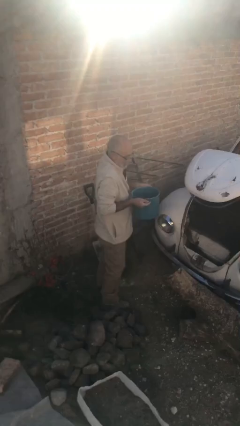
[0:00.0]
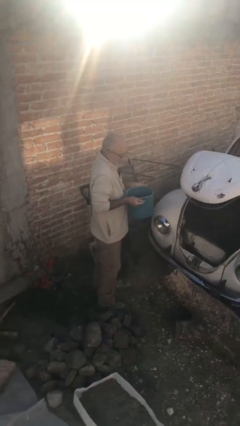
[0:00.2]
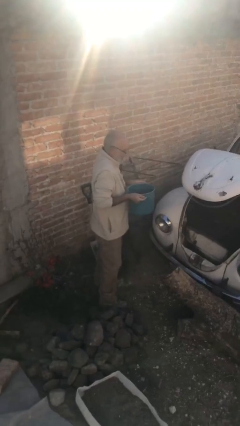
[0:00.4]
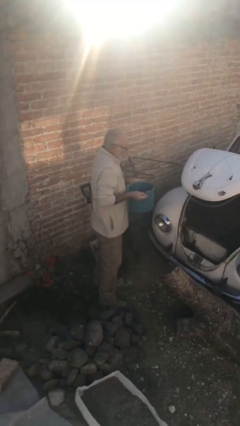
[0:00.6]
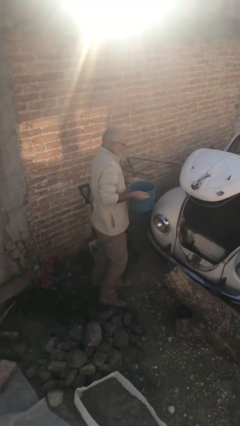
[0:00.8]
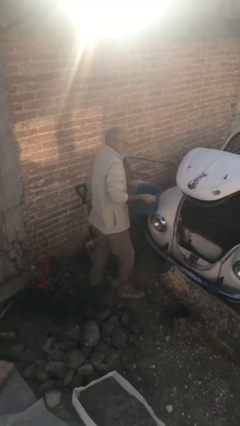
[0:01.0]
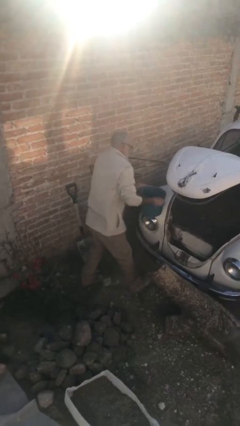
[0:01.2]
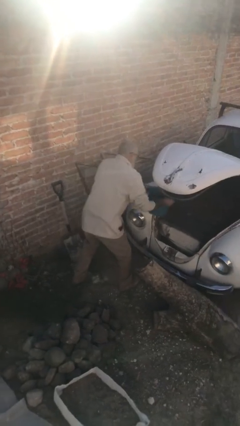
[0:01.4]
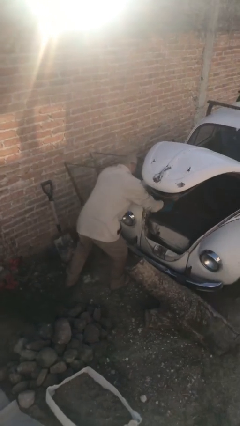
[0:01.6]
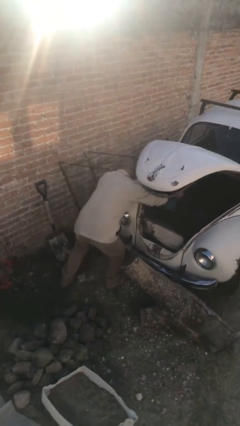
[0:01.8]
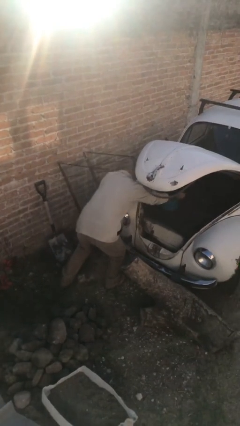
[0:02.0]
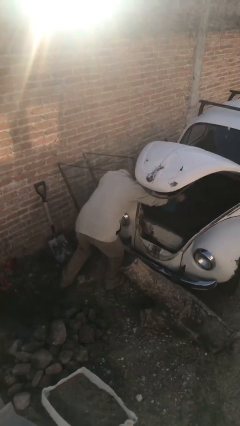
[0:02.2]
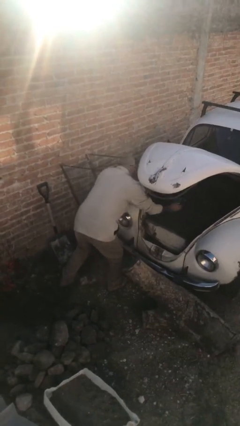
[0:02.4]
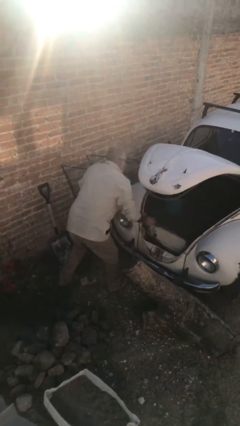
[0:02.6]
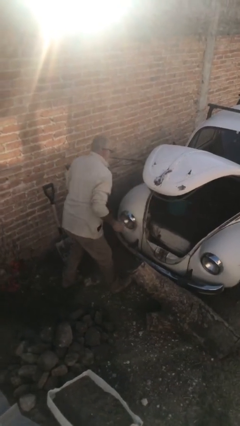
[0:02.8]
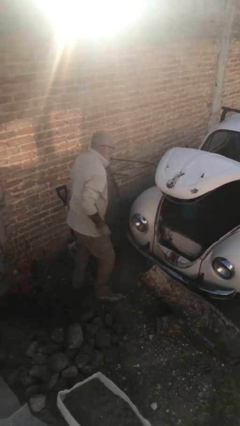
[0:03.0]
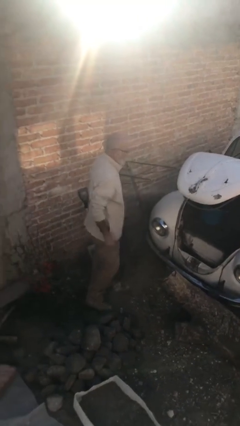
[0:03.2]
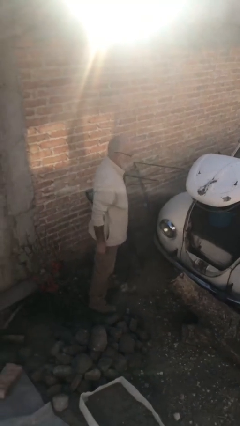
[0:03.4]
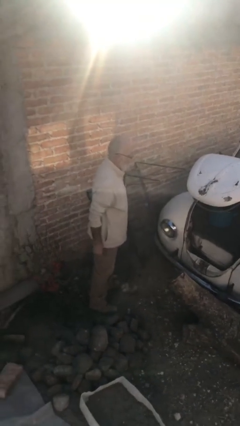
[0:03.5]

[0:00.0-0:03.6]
person loads car

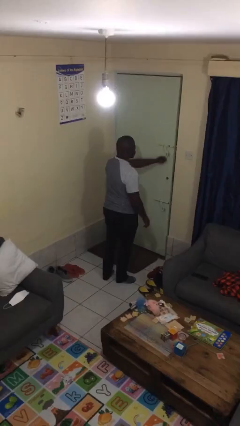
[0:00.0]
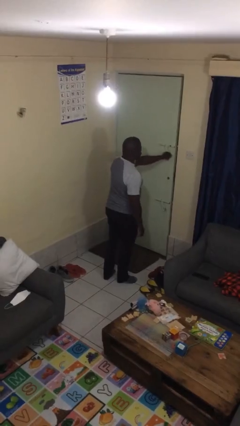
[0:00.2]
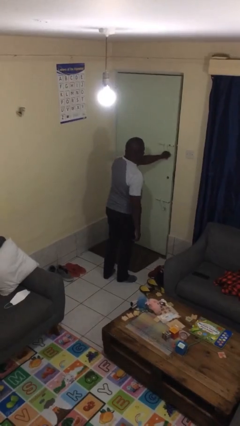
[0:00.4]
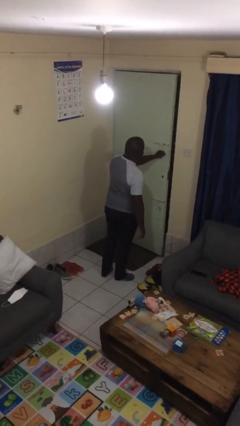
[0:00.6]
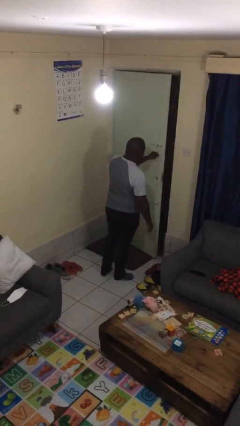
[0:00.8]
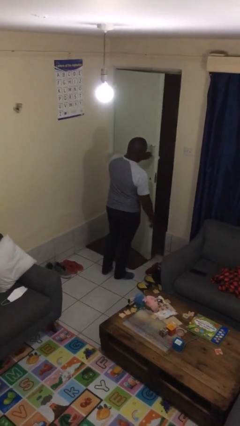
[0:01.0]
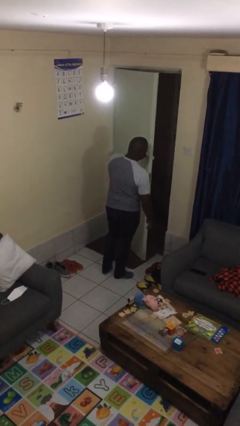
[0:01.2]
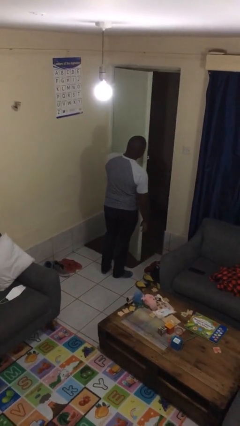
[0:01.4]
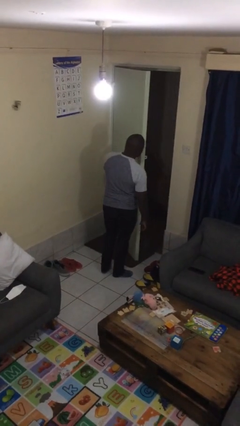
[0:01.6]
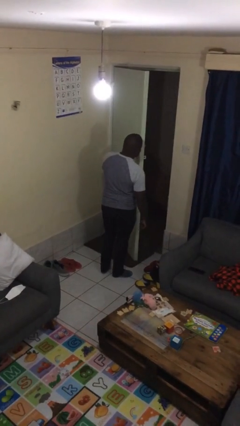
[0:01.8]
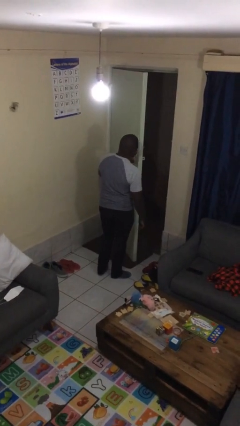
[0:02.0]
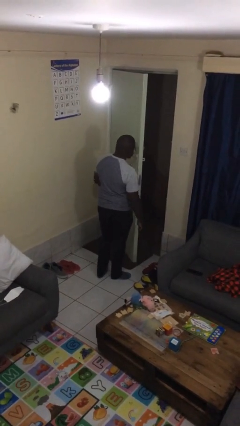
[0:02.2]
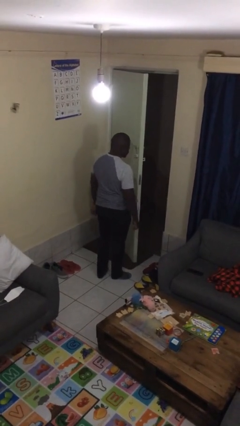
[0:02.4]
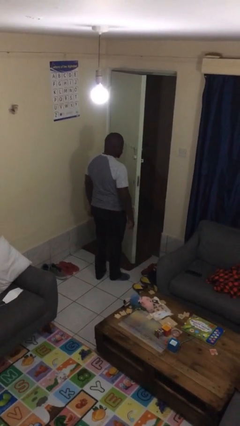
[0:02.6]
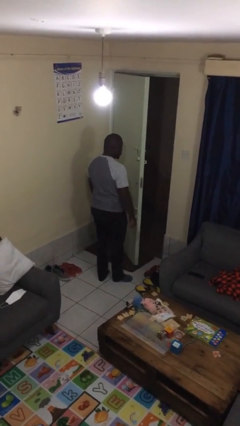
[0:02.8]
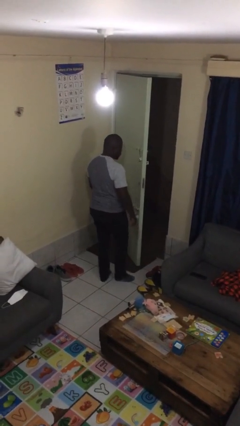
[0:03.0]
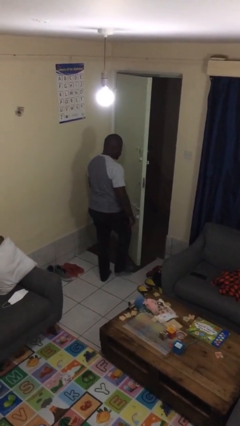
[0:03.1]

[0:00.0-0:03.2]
person opens facility door

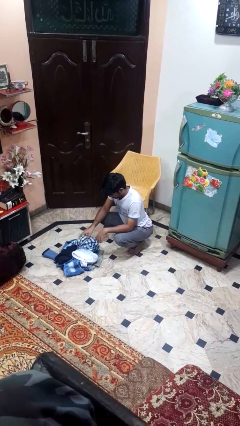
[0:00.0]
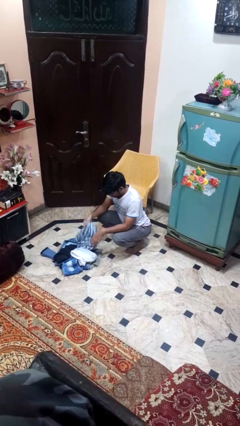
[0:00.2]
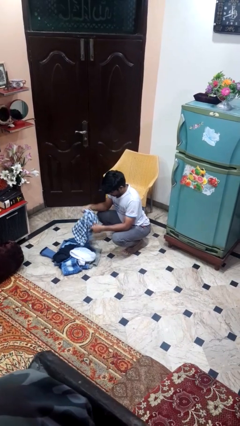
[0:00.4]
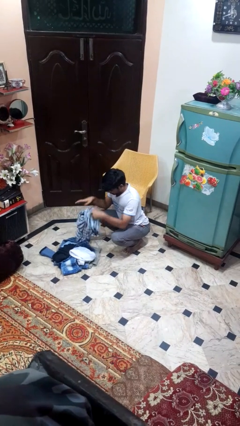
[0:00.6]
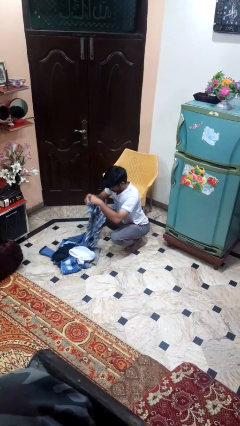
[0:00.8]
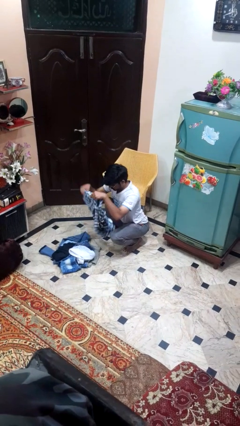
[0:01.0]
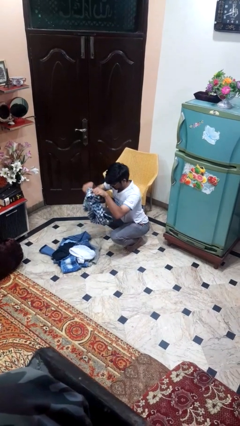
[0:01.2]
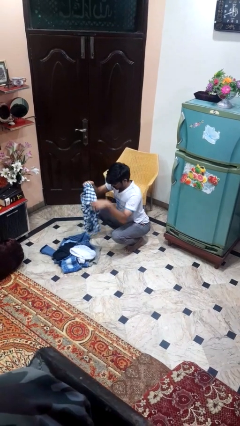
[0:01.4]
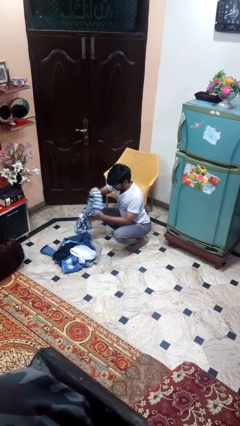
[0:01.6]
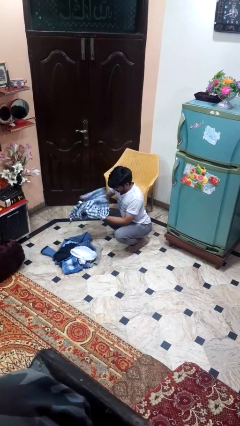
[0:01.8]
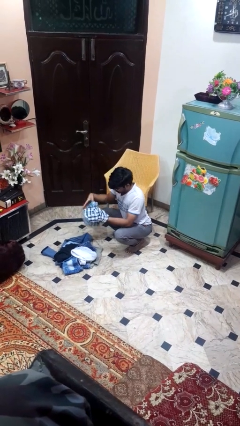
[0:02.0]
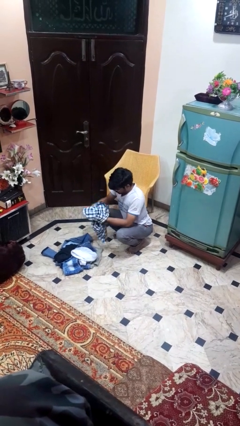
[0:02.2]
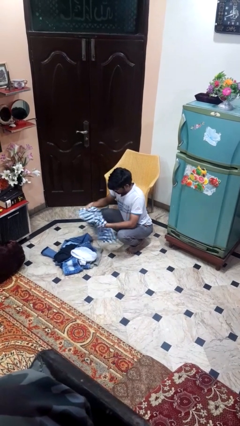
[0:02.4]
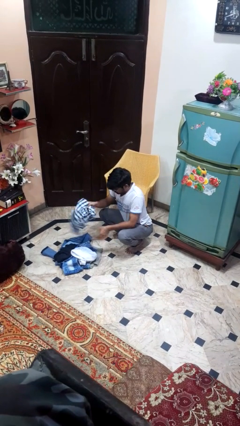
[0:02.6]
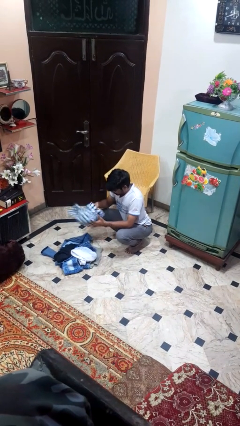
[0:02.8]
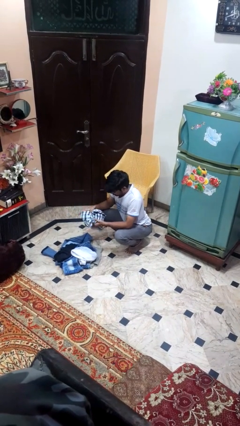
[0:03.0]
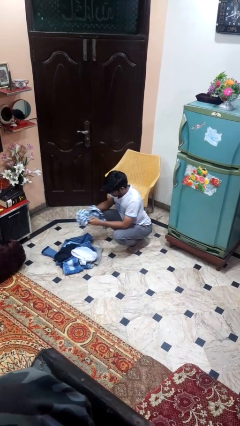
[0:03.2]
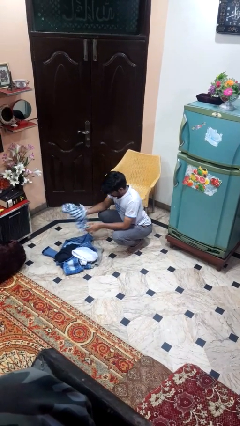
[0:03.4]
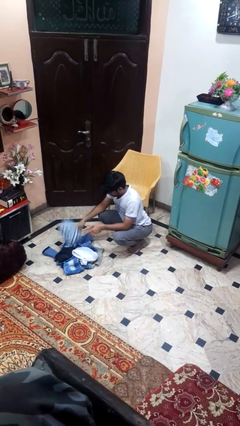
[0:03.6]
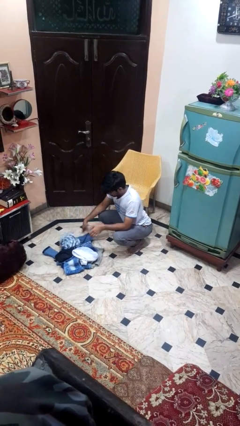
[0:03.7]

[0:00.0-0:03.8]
person folds pants

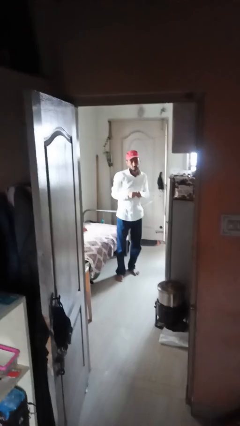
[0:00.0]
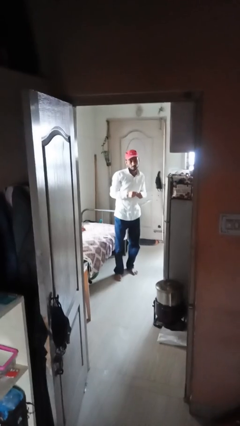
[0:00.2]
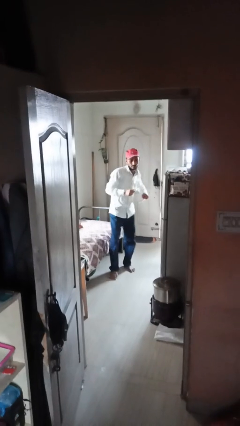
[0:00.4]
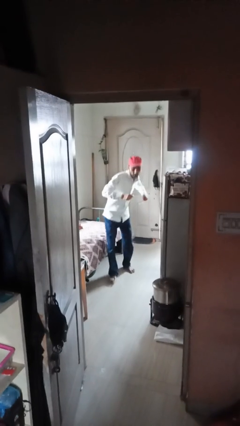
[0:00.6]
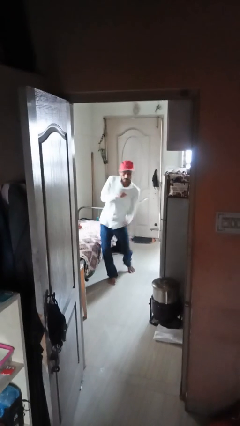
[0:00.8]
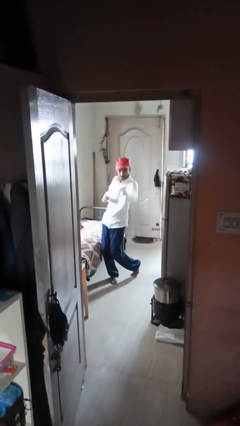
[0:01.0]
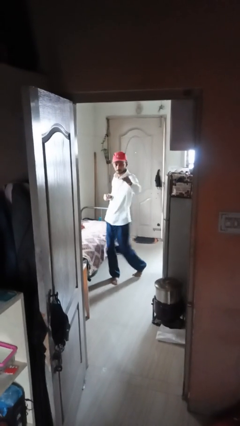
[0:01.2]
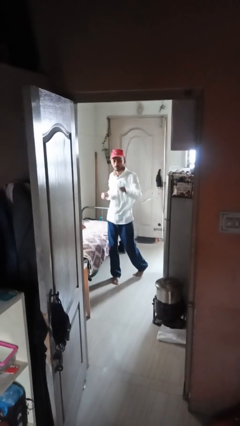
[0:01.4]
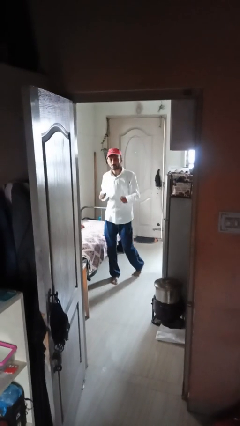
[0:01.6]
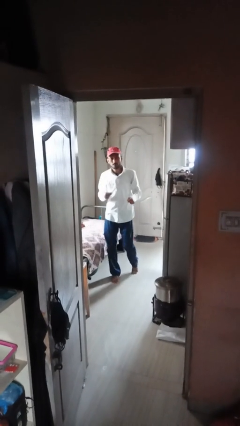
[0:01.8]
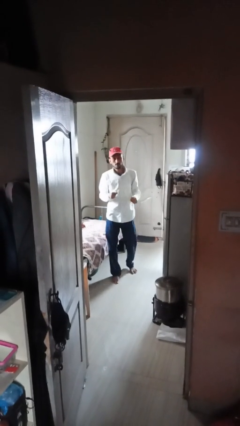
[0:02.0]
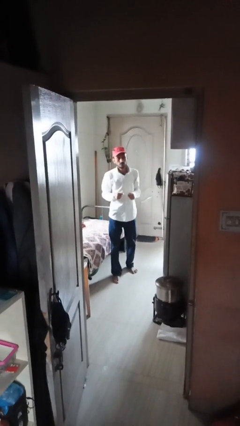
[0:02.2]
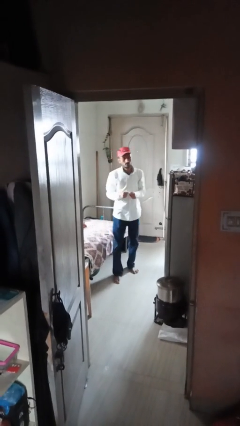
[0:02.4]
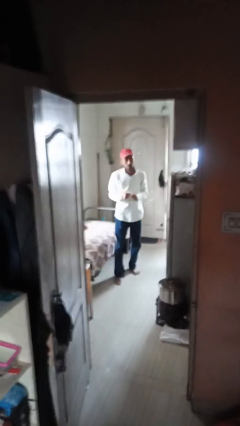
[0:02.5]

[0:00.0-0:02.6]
person punches

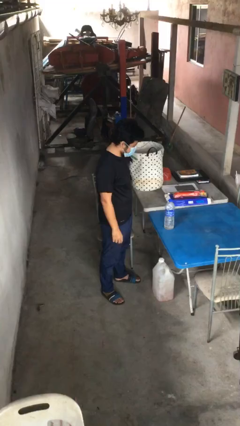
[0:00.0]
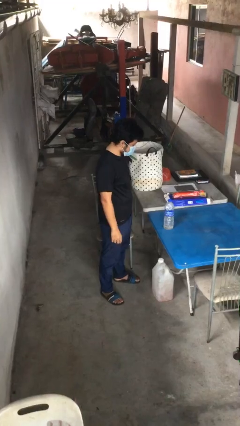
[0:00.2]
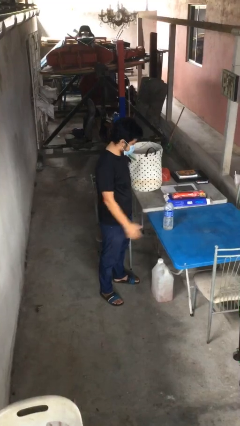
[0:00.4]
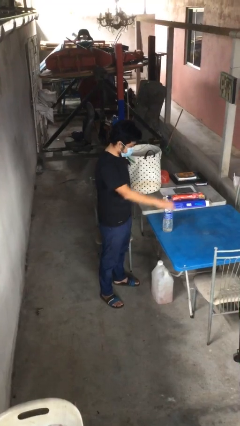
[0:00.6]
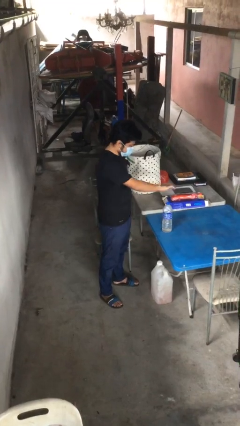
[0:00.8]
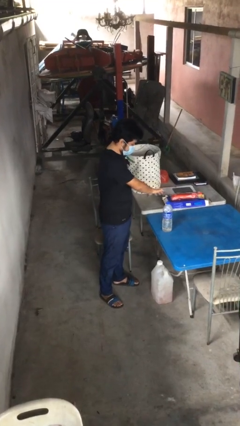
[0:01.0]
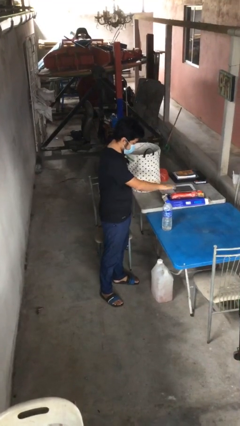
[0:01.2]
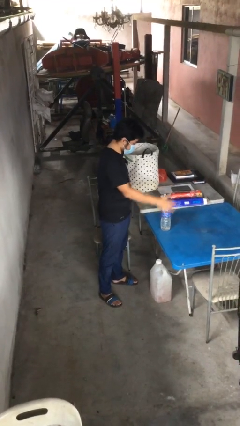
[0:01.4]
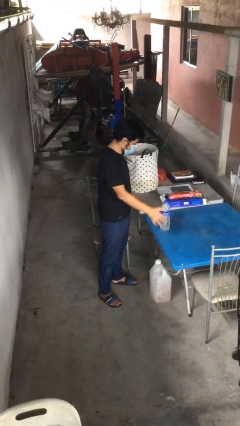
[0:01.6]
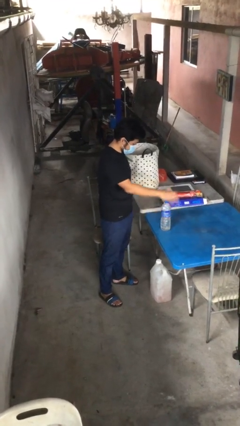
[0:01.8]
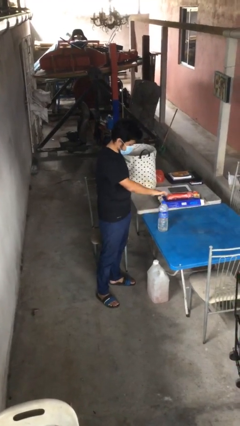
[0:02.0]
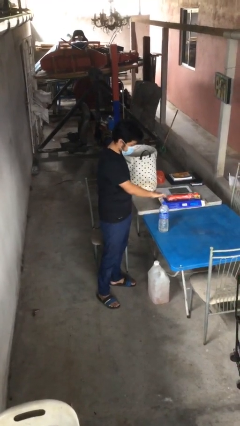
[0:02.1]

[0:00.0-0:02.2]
person waves hand over object

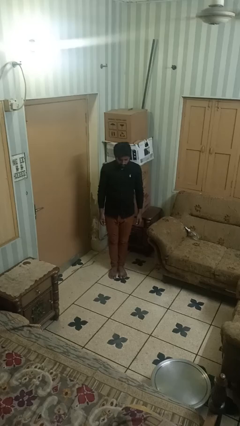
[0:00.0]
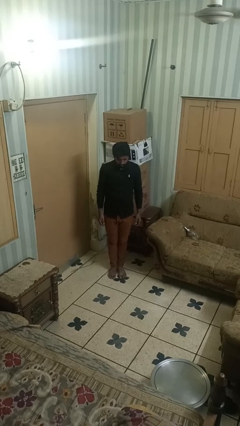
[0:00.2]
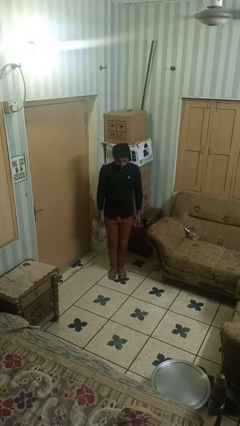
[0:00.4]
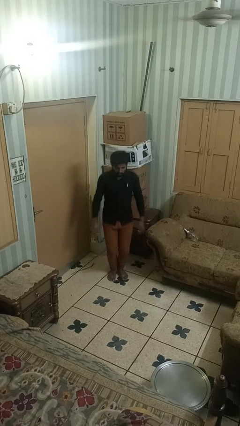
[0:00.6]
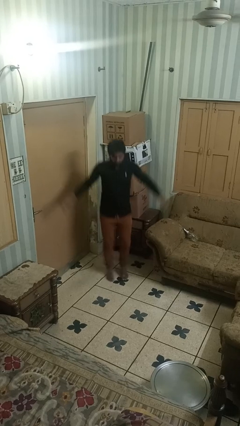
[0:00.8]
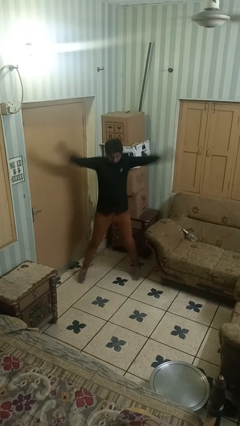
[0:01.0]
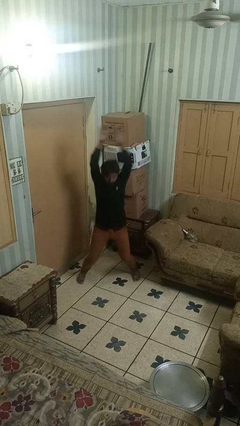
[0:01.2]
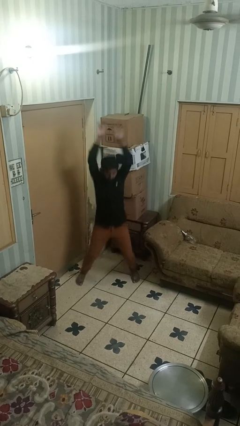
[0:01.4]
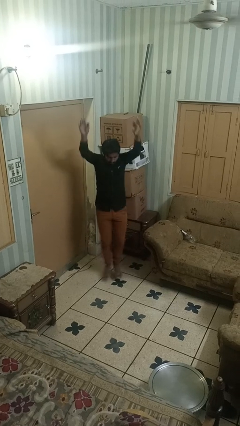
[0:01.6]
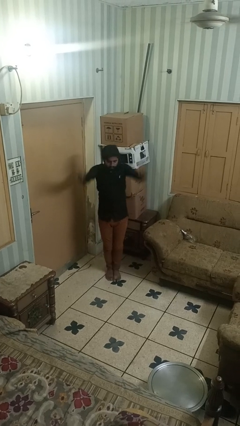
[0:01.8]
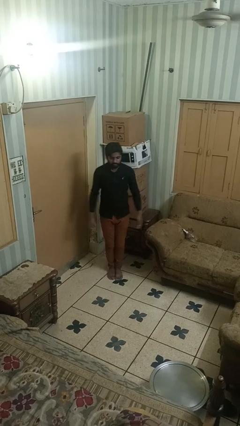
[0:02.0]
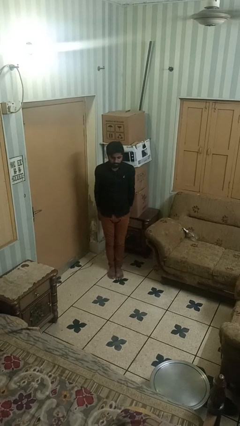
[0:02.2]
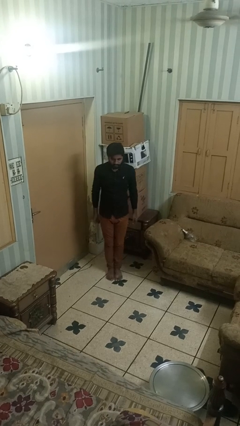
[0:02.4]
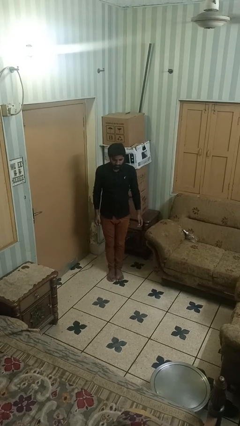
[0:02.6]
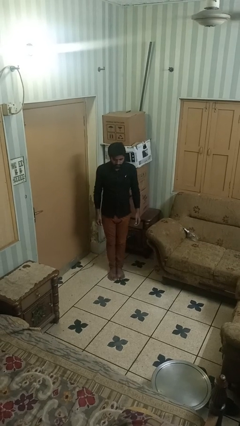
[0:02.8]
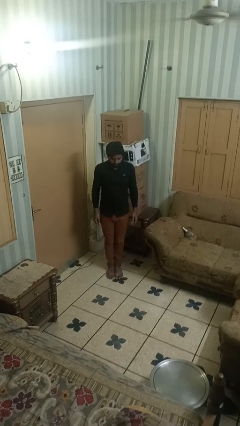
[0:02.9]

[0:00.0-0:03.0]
person exercises with jumping jacks
